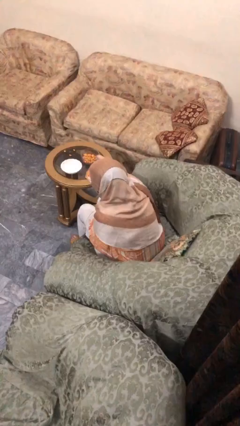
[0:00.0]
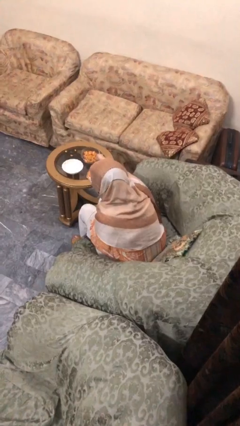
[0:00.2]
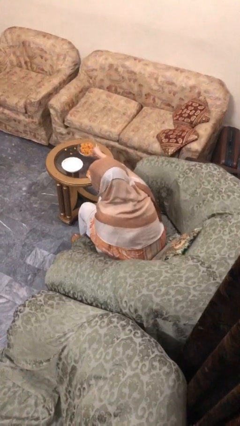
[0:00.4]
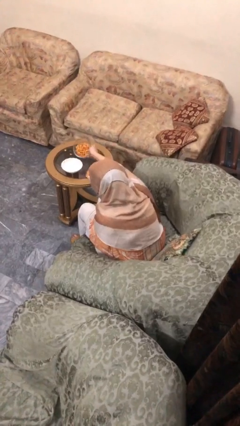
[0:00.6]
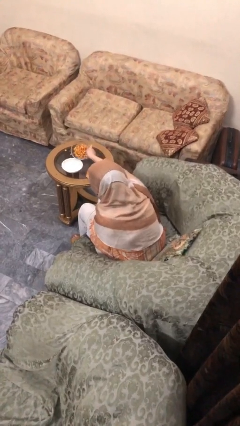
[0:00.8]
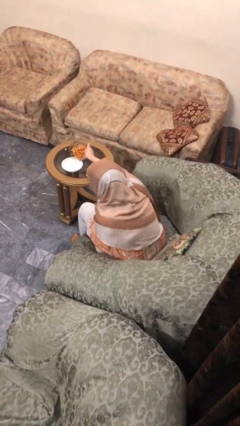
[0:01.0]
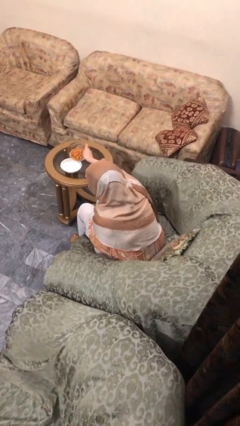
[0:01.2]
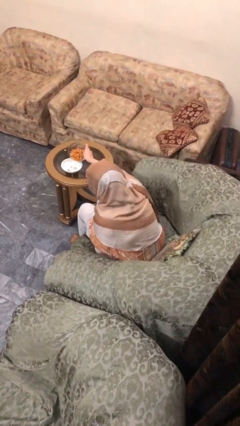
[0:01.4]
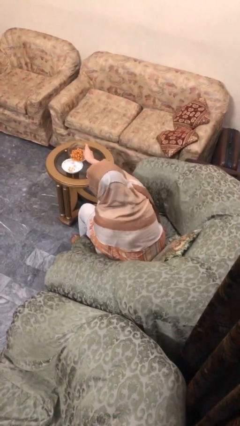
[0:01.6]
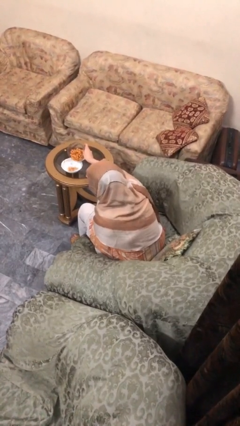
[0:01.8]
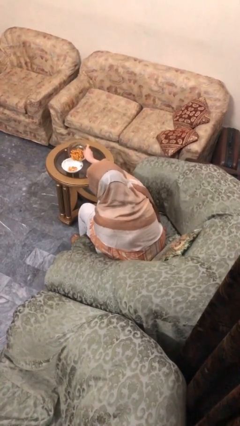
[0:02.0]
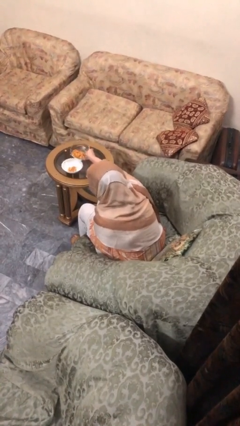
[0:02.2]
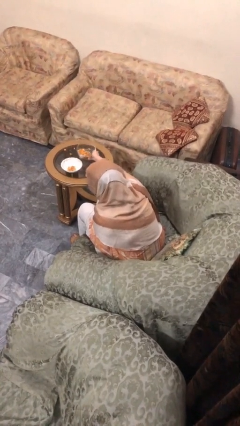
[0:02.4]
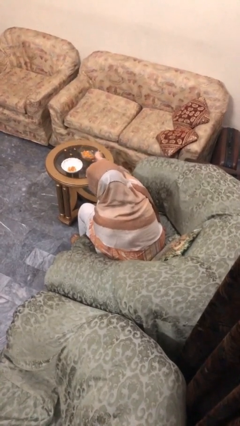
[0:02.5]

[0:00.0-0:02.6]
person pours into bowl

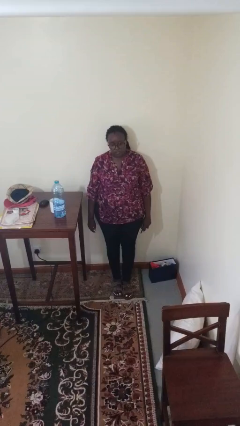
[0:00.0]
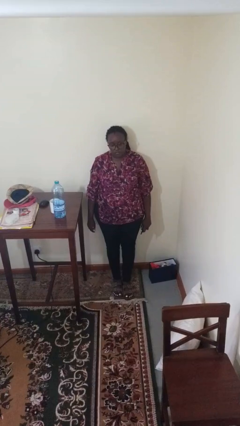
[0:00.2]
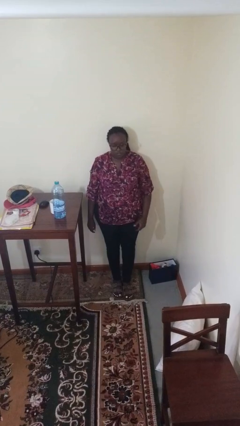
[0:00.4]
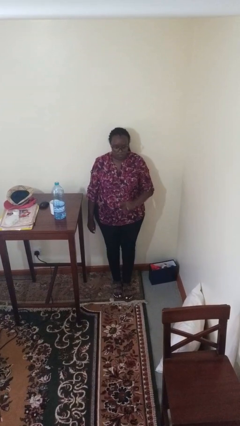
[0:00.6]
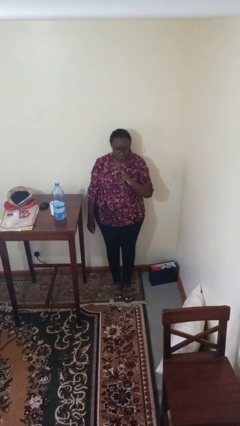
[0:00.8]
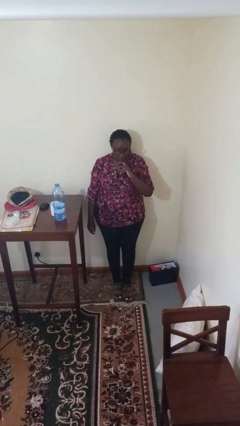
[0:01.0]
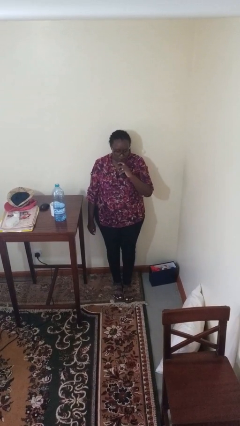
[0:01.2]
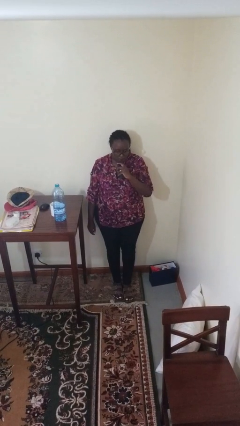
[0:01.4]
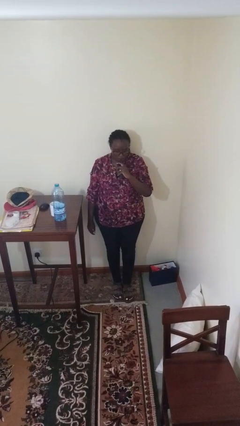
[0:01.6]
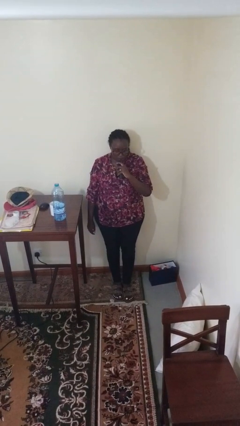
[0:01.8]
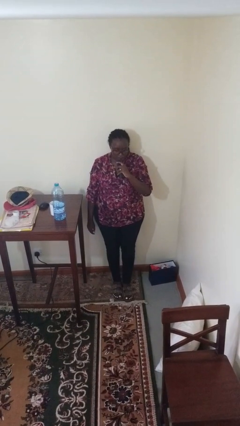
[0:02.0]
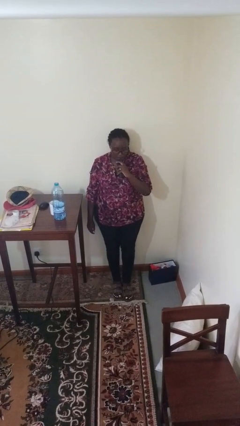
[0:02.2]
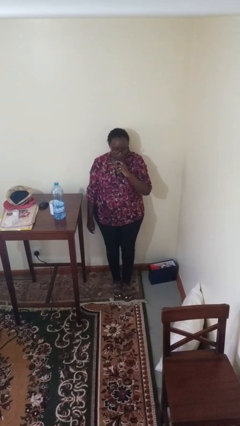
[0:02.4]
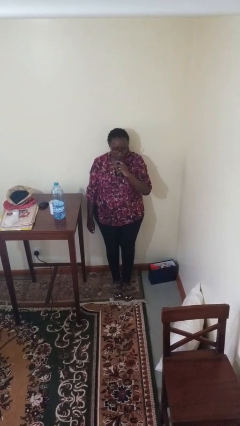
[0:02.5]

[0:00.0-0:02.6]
person vapes

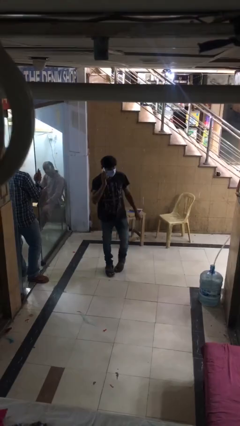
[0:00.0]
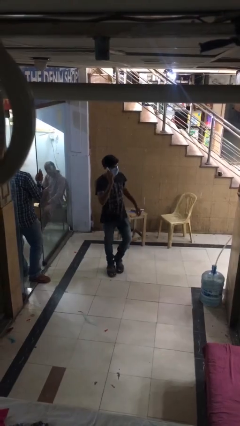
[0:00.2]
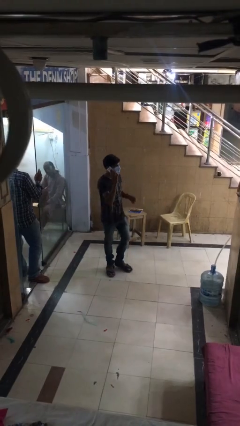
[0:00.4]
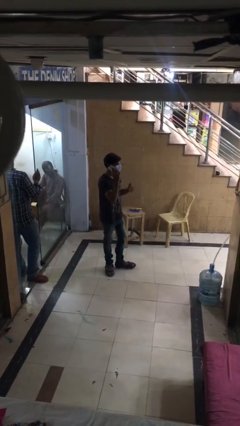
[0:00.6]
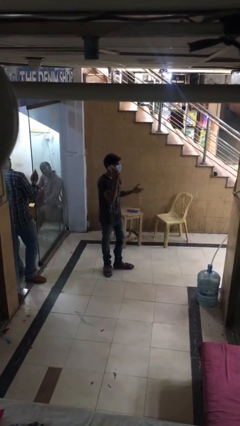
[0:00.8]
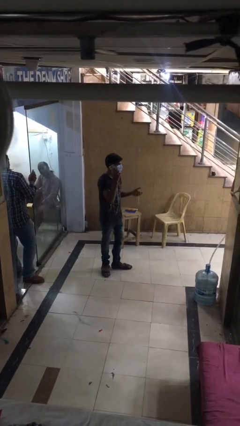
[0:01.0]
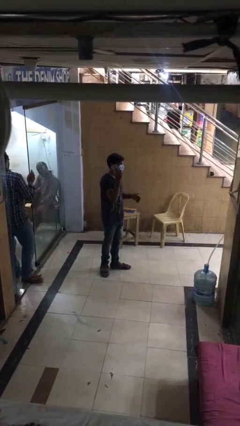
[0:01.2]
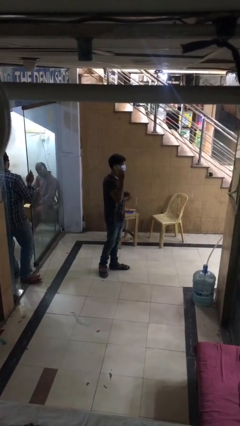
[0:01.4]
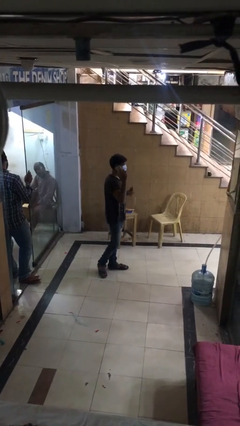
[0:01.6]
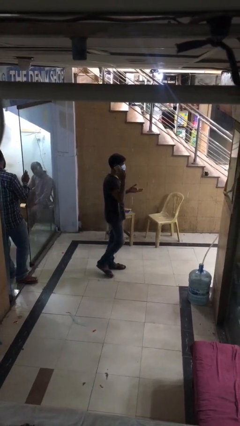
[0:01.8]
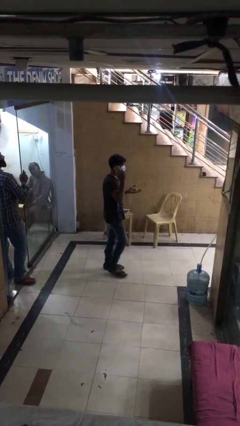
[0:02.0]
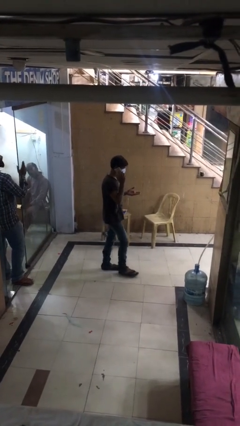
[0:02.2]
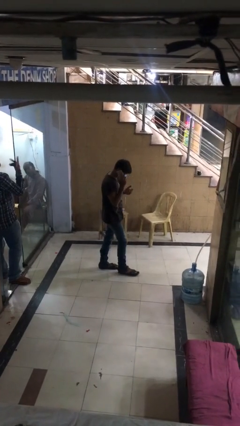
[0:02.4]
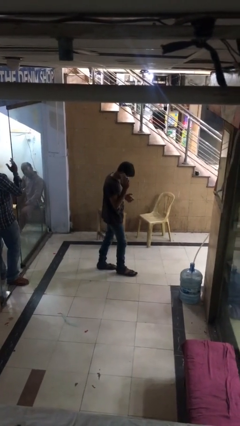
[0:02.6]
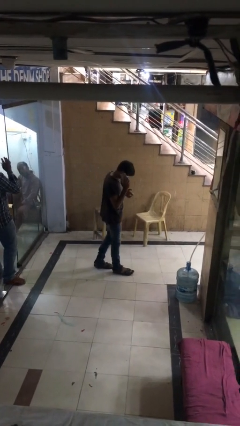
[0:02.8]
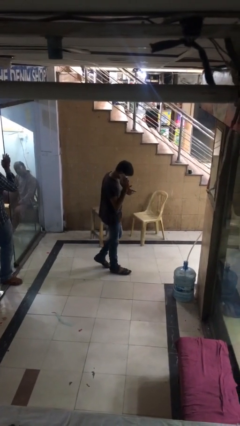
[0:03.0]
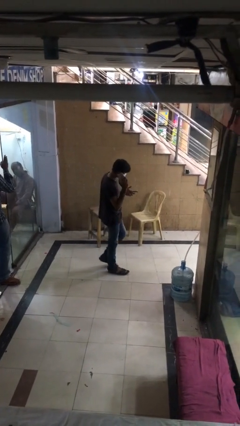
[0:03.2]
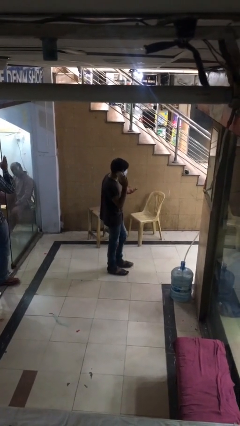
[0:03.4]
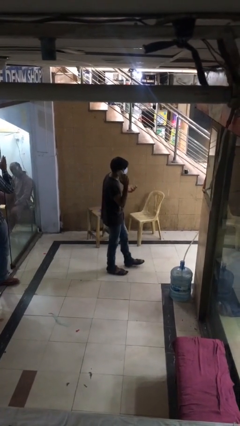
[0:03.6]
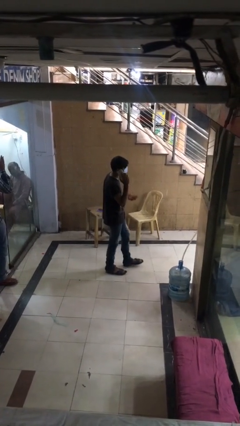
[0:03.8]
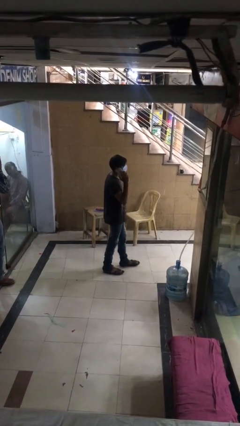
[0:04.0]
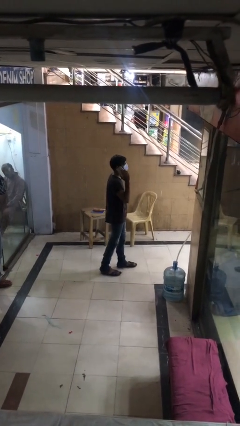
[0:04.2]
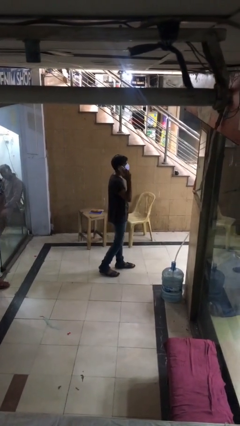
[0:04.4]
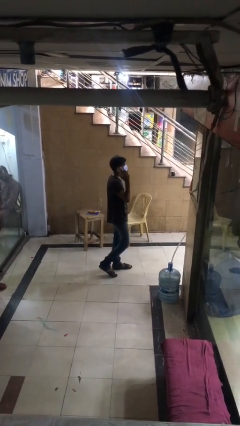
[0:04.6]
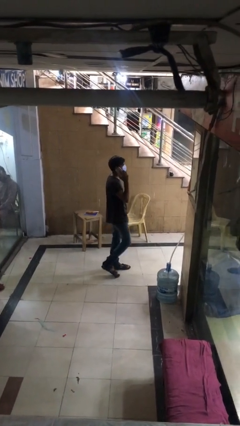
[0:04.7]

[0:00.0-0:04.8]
person talks on phone

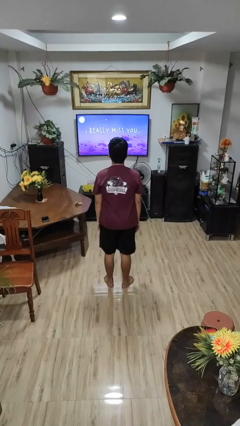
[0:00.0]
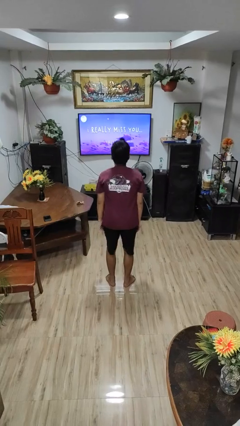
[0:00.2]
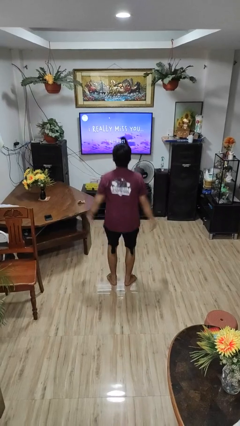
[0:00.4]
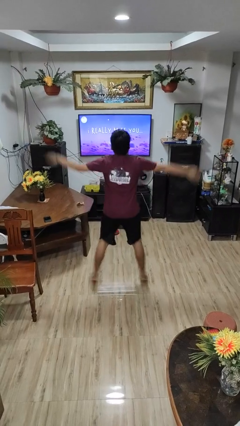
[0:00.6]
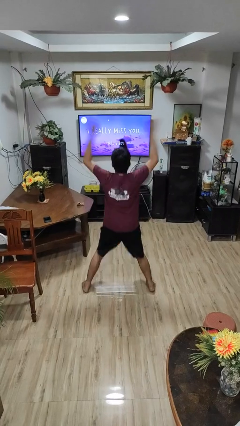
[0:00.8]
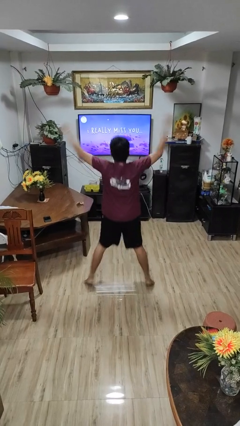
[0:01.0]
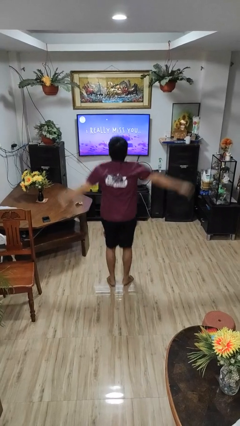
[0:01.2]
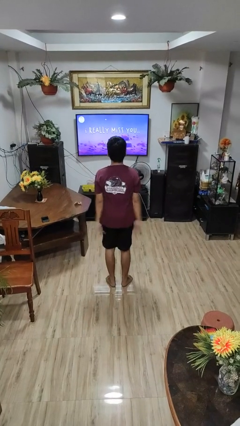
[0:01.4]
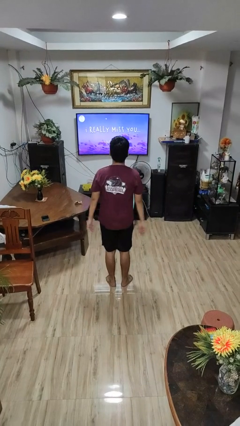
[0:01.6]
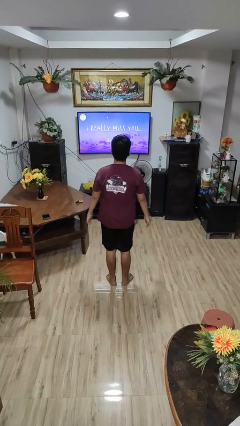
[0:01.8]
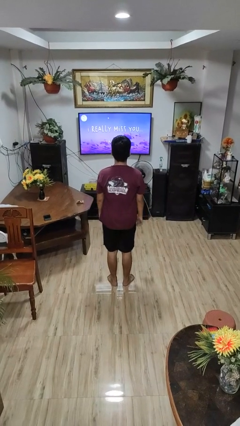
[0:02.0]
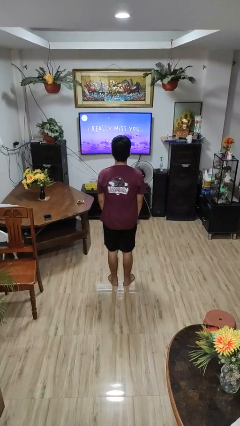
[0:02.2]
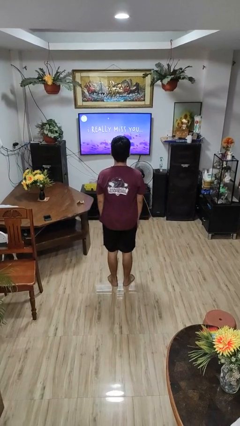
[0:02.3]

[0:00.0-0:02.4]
person exercises with jumping jacks

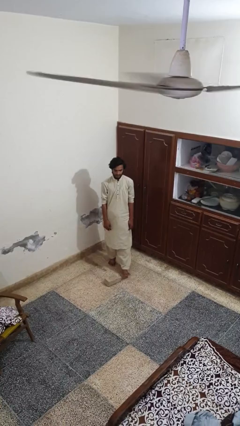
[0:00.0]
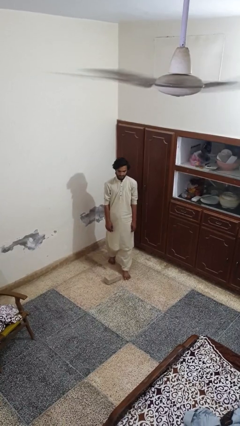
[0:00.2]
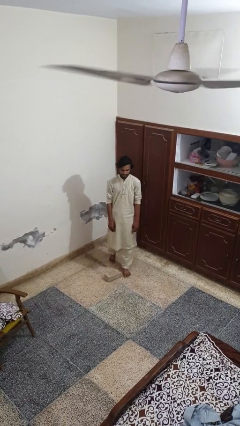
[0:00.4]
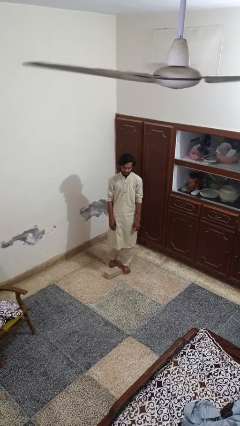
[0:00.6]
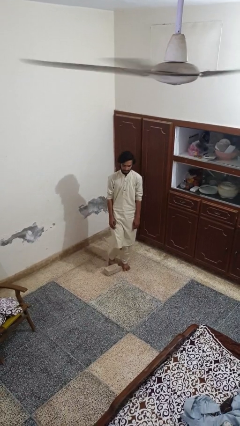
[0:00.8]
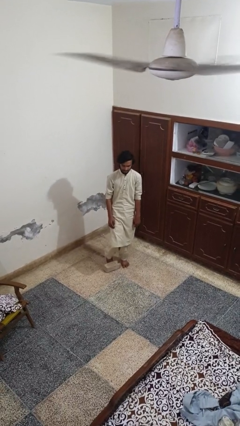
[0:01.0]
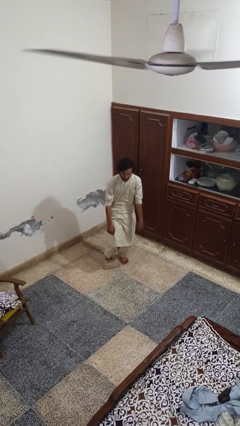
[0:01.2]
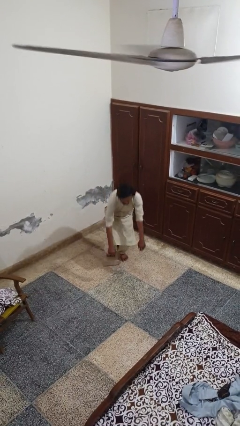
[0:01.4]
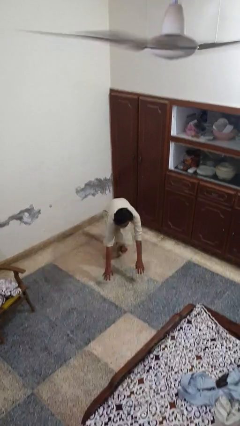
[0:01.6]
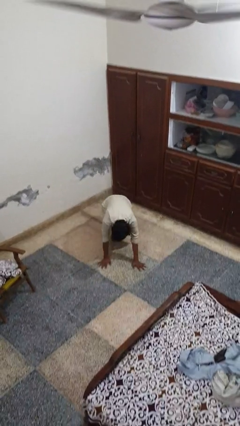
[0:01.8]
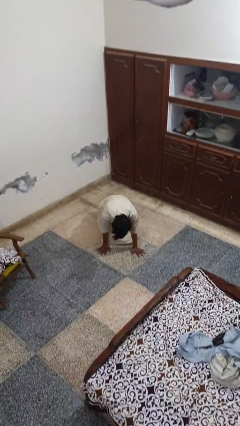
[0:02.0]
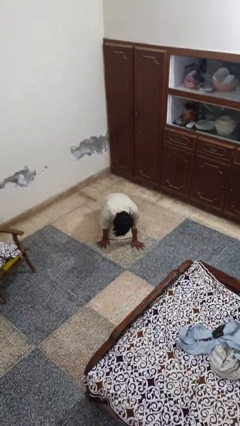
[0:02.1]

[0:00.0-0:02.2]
person trips on object on floor

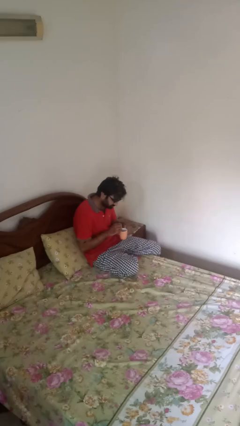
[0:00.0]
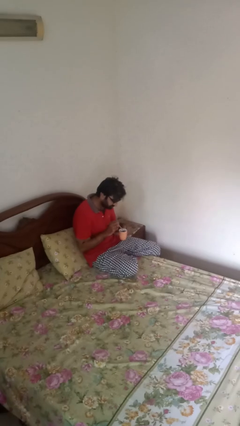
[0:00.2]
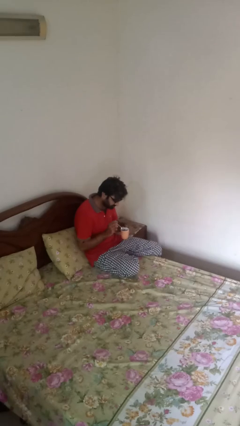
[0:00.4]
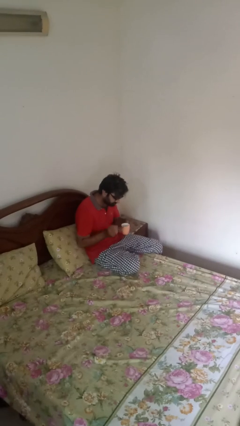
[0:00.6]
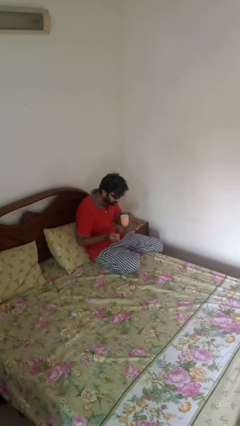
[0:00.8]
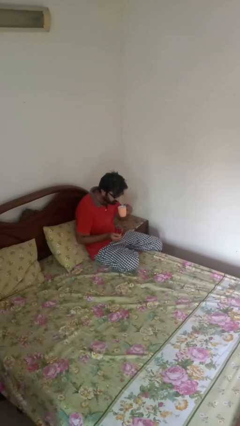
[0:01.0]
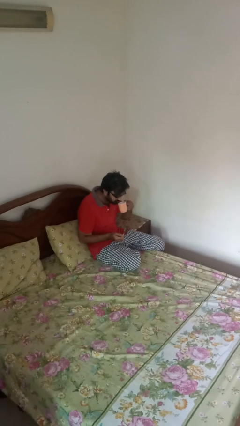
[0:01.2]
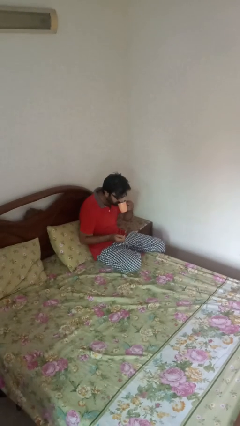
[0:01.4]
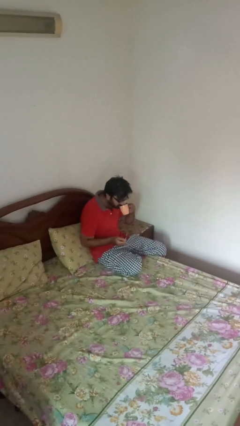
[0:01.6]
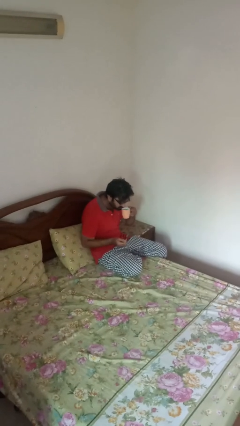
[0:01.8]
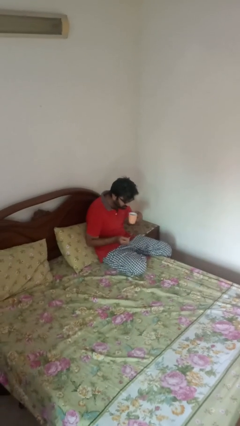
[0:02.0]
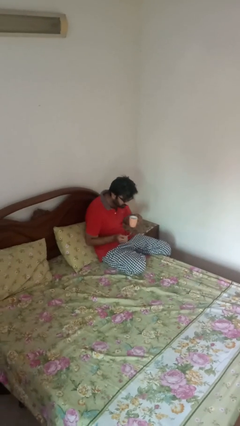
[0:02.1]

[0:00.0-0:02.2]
person drinks from mug

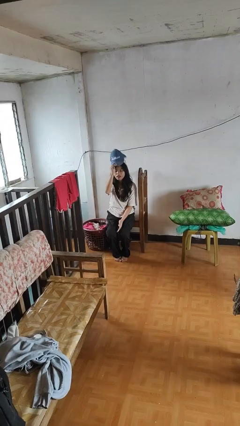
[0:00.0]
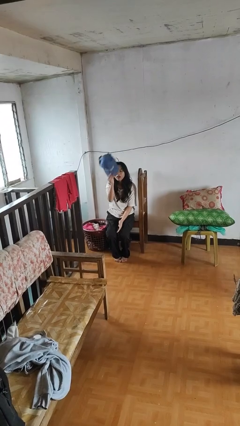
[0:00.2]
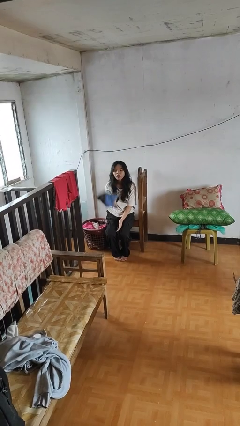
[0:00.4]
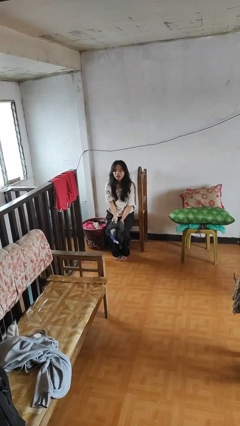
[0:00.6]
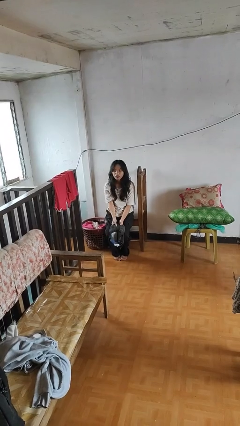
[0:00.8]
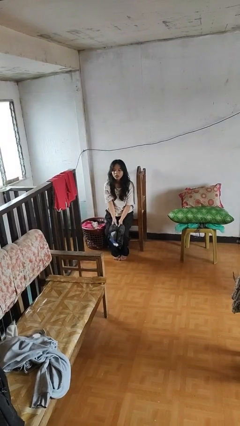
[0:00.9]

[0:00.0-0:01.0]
person takes off hat
